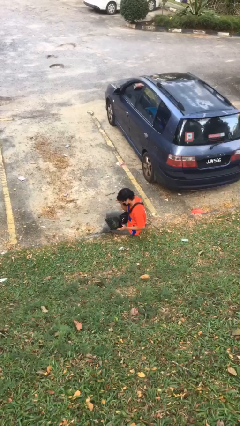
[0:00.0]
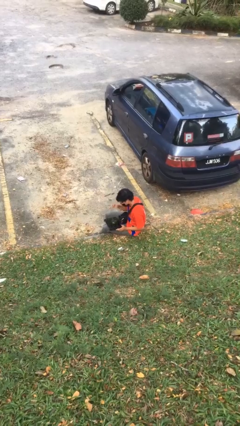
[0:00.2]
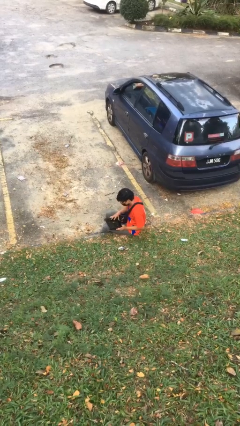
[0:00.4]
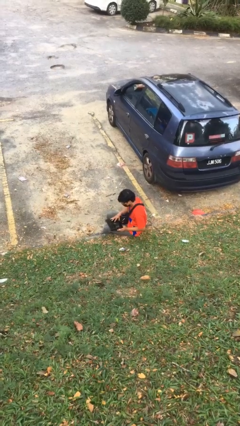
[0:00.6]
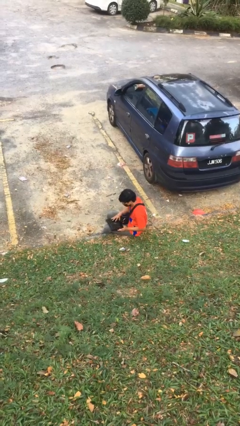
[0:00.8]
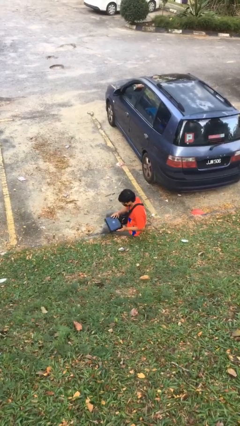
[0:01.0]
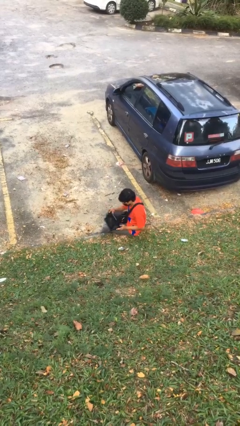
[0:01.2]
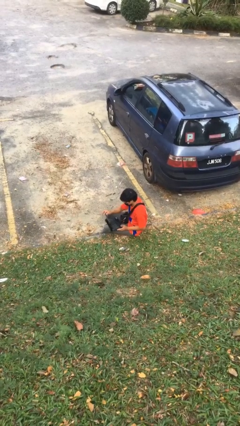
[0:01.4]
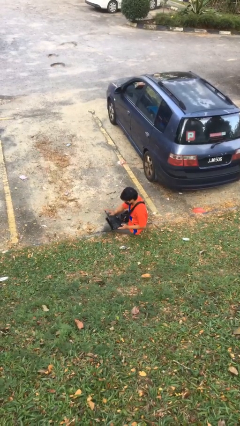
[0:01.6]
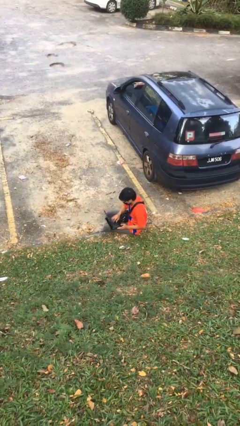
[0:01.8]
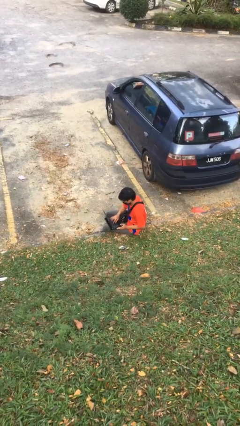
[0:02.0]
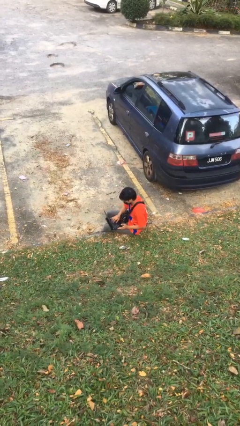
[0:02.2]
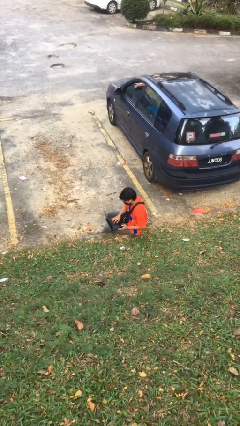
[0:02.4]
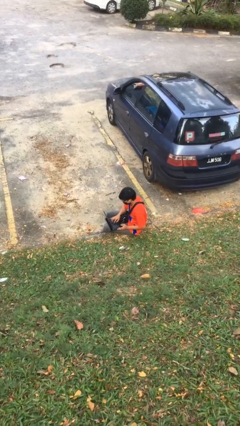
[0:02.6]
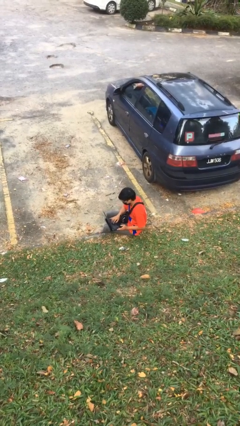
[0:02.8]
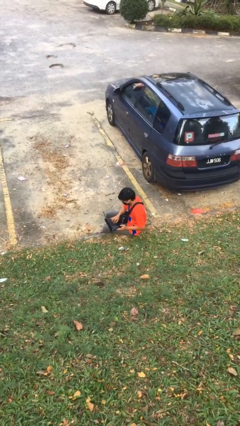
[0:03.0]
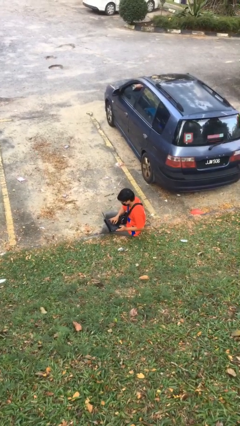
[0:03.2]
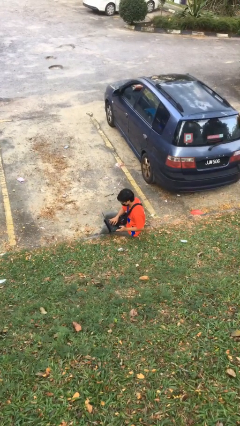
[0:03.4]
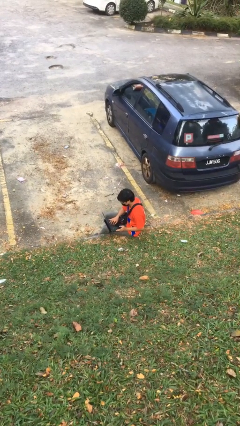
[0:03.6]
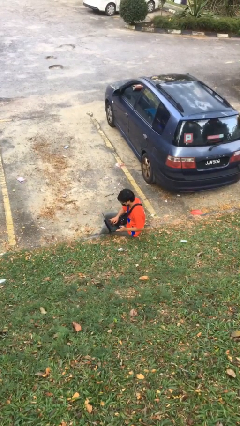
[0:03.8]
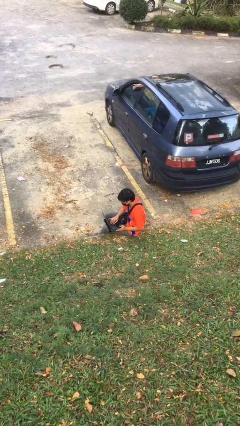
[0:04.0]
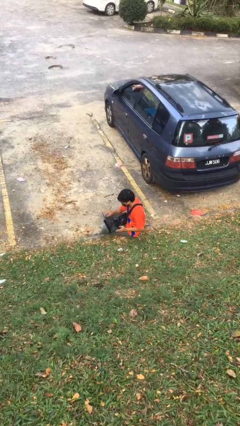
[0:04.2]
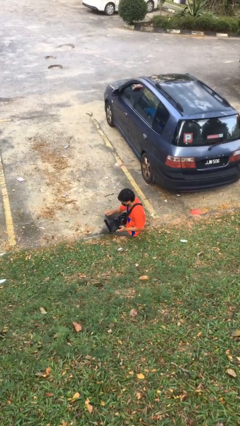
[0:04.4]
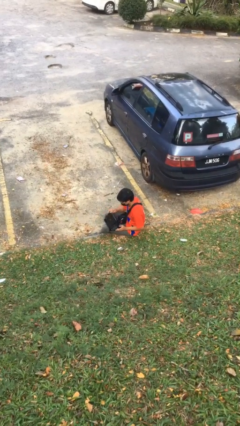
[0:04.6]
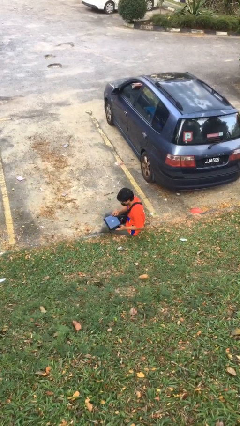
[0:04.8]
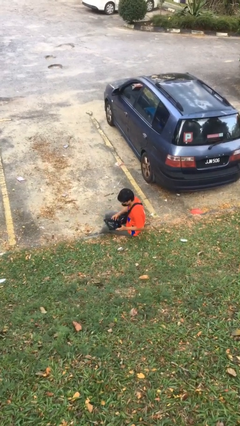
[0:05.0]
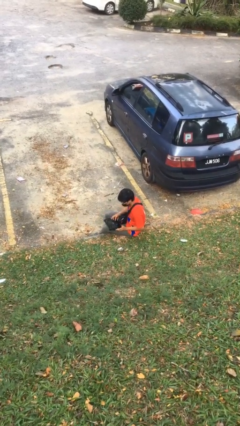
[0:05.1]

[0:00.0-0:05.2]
person interacts with laptop

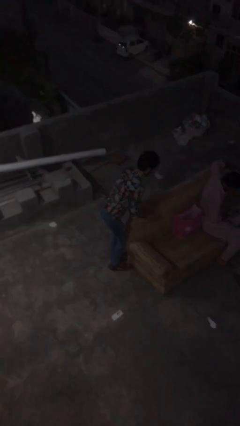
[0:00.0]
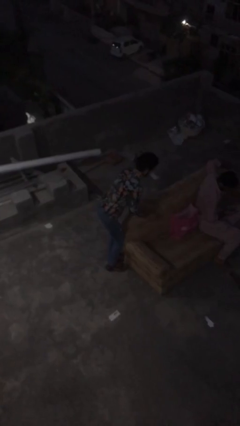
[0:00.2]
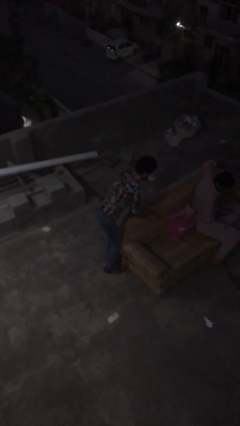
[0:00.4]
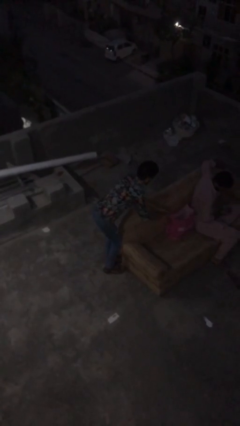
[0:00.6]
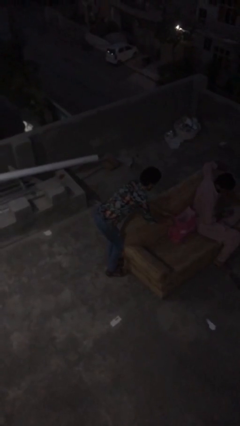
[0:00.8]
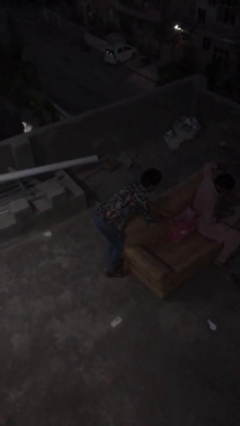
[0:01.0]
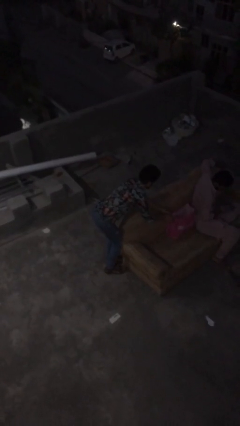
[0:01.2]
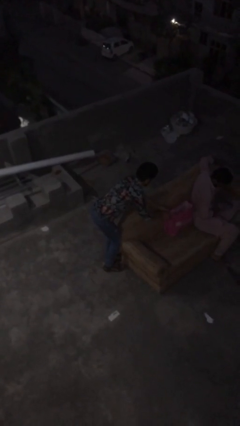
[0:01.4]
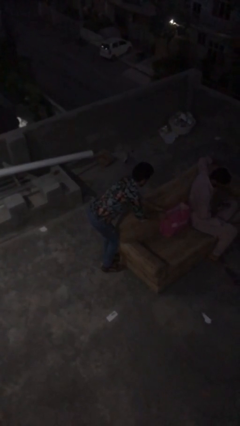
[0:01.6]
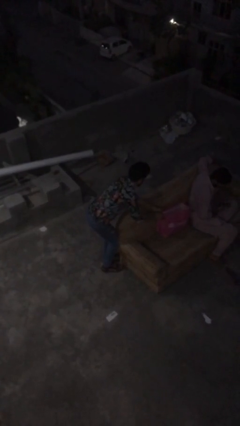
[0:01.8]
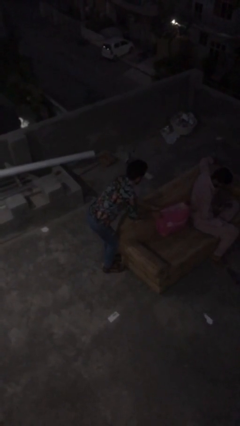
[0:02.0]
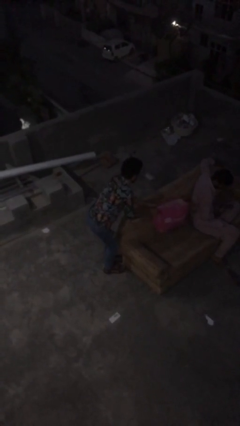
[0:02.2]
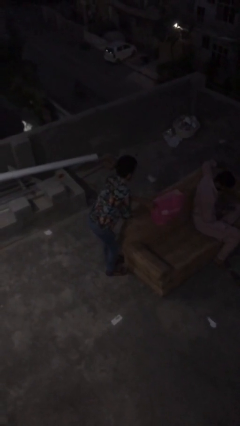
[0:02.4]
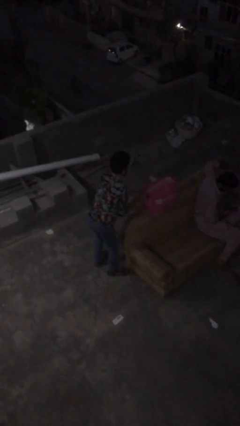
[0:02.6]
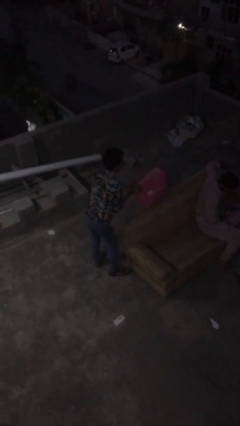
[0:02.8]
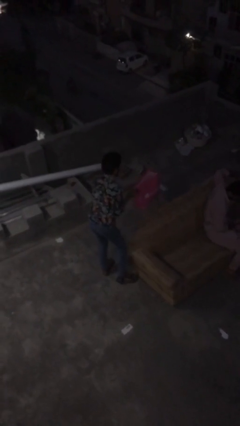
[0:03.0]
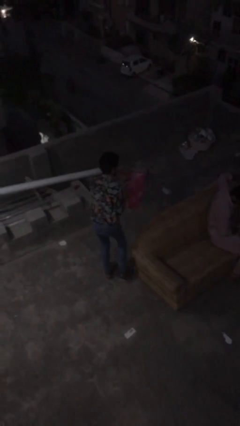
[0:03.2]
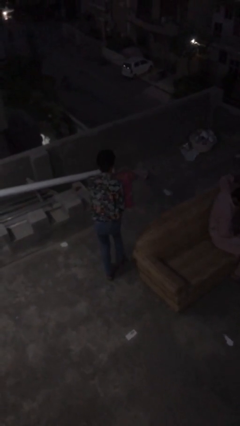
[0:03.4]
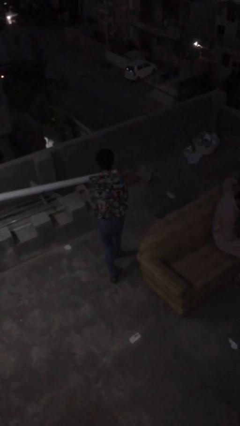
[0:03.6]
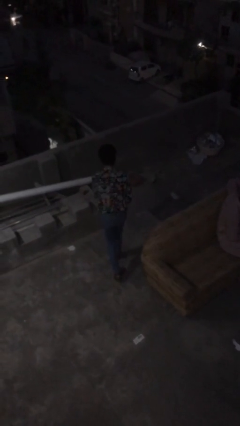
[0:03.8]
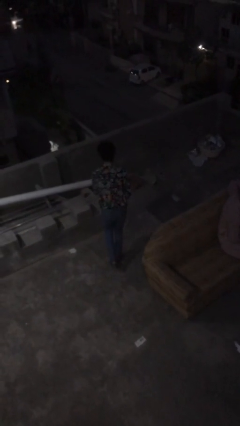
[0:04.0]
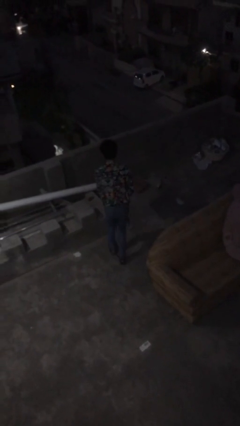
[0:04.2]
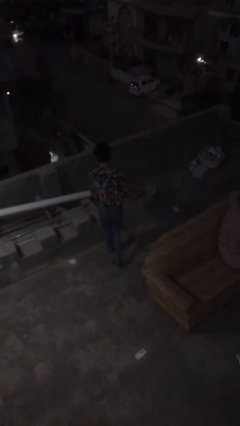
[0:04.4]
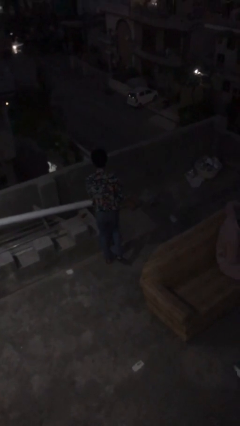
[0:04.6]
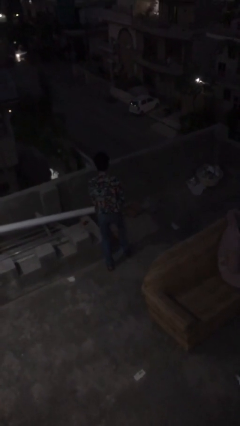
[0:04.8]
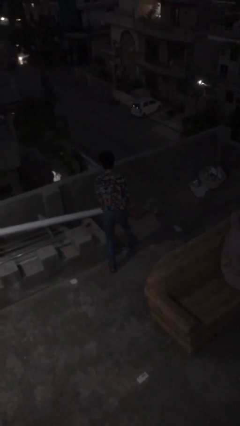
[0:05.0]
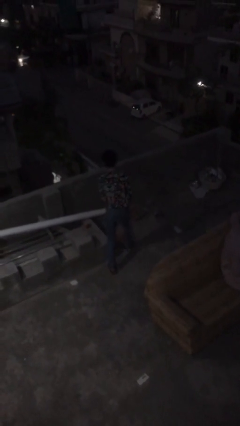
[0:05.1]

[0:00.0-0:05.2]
person steals object from person

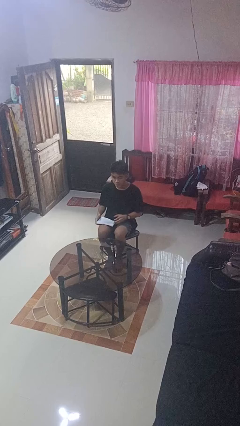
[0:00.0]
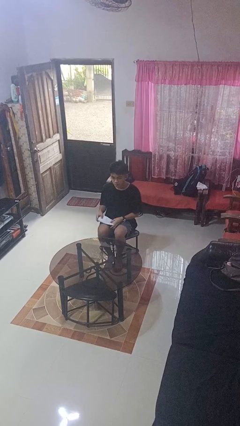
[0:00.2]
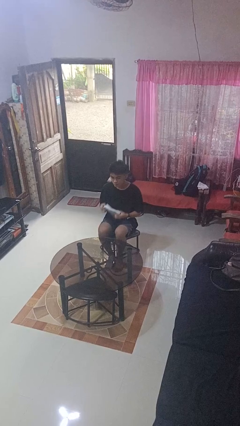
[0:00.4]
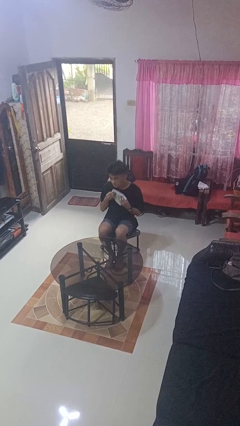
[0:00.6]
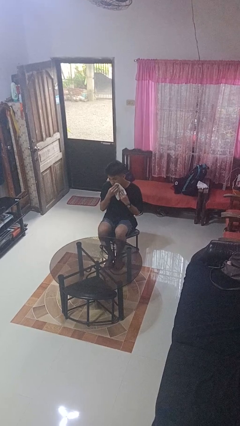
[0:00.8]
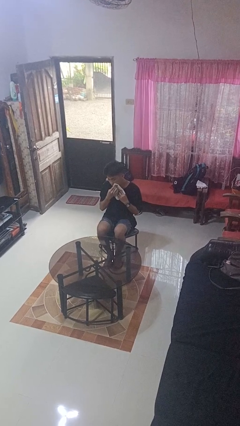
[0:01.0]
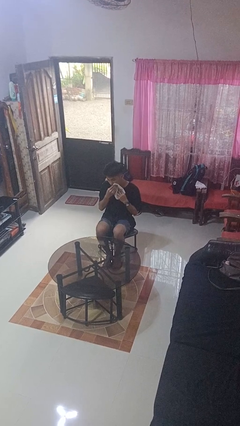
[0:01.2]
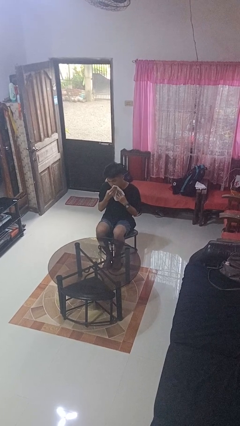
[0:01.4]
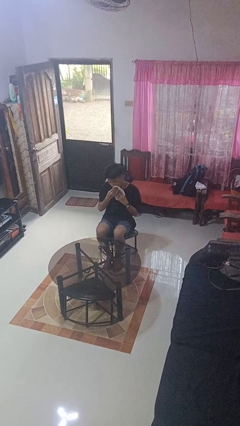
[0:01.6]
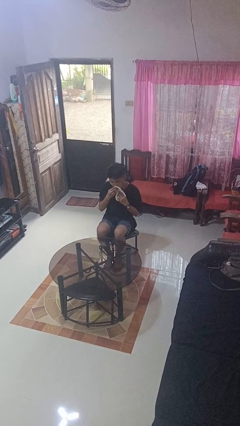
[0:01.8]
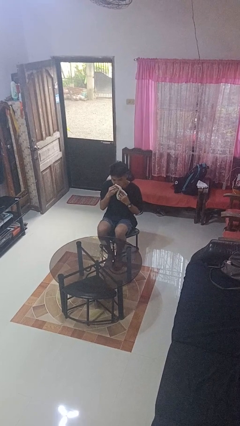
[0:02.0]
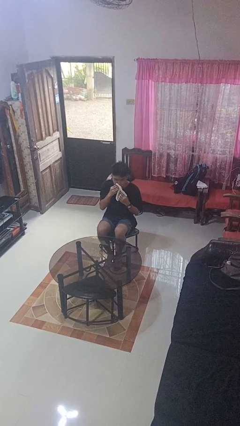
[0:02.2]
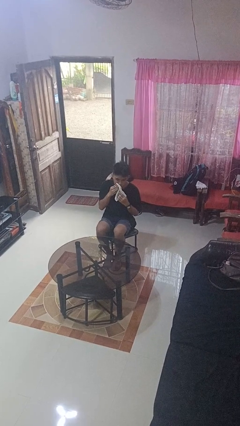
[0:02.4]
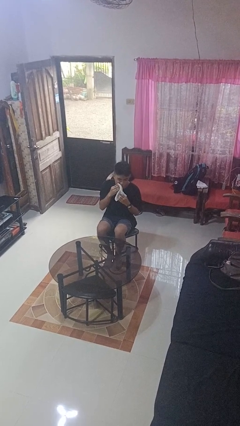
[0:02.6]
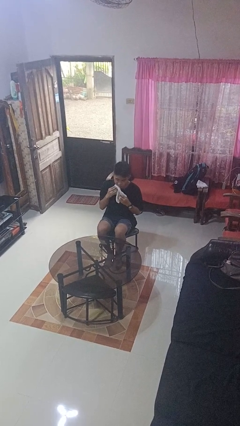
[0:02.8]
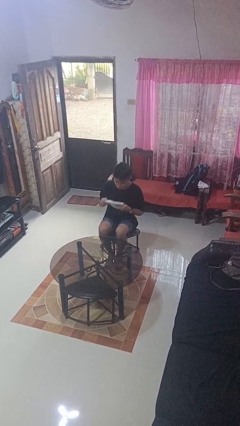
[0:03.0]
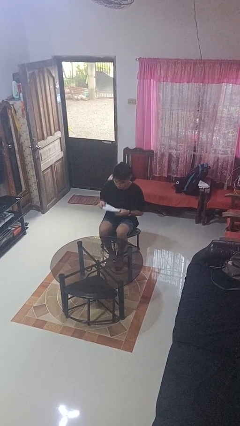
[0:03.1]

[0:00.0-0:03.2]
person wipes mouth with napkin

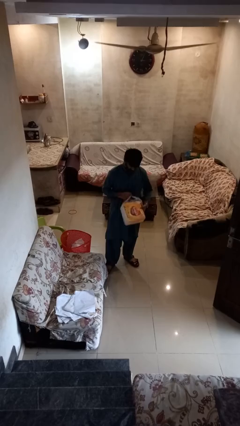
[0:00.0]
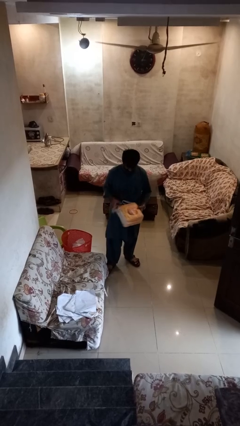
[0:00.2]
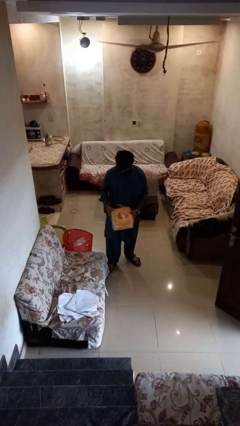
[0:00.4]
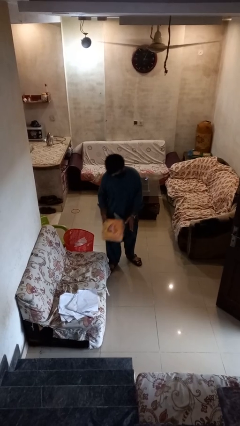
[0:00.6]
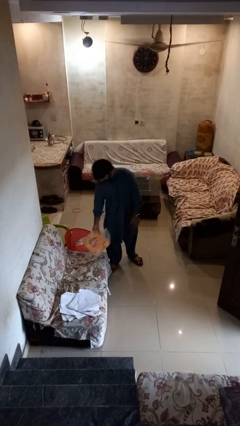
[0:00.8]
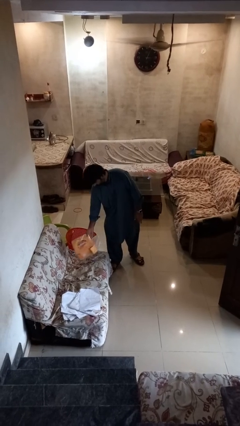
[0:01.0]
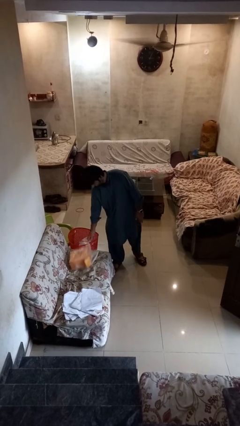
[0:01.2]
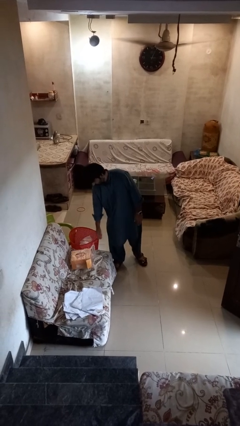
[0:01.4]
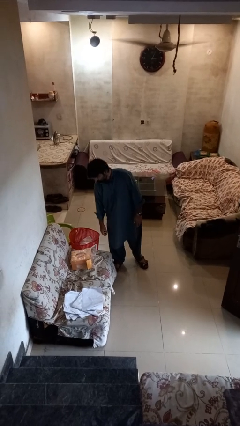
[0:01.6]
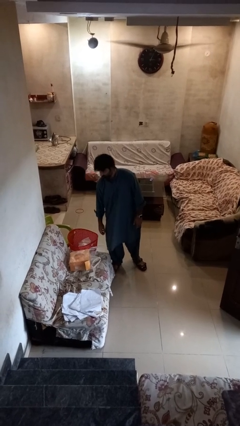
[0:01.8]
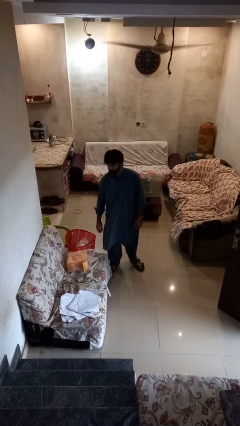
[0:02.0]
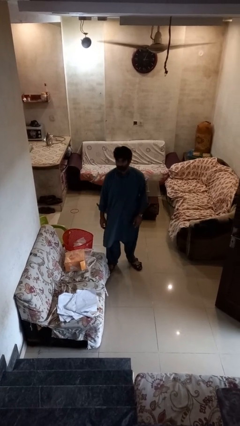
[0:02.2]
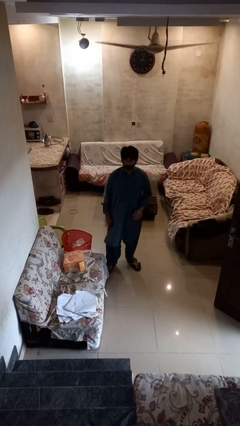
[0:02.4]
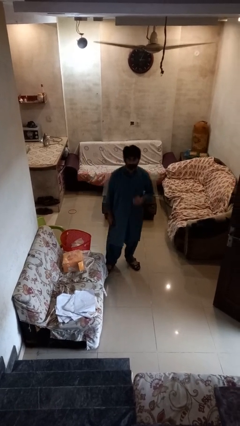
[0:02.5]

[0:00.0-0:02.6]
person puts down object on couch

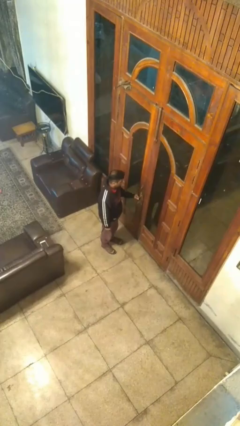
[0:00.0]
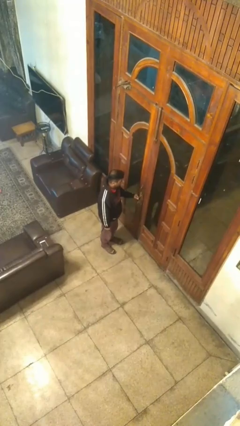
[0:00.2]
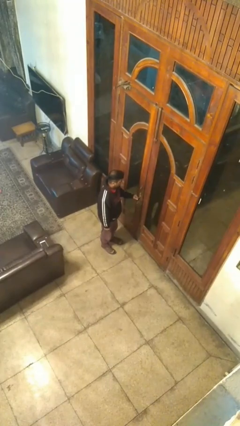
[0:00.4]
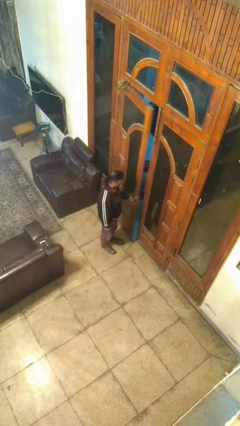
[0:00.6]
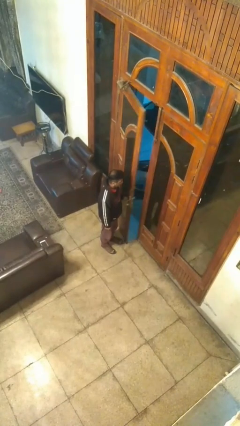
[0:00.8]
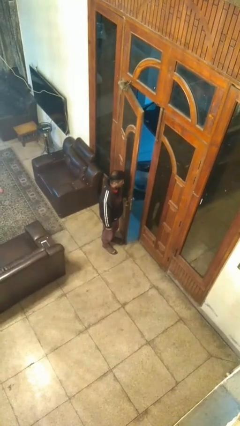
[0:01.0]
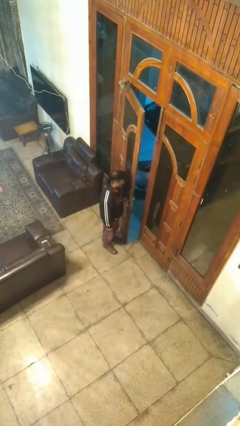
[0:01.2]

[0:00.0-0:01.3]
person opens facility door
